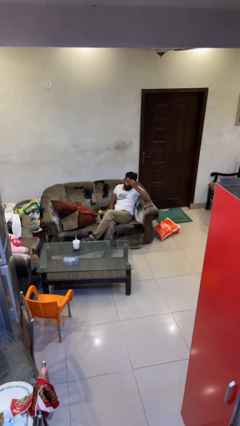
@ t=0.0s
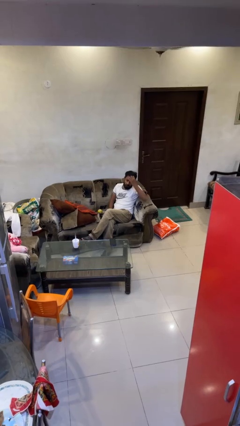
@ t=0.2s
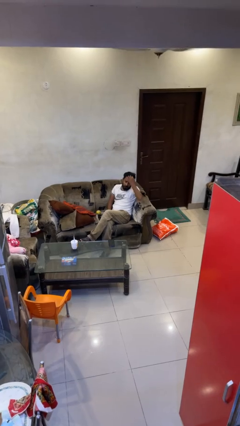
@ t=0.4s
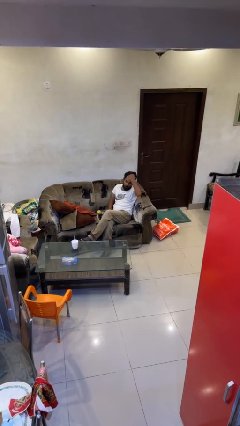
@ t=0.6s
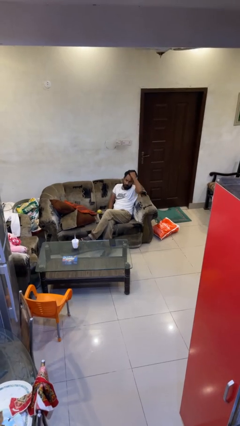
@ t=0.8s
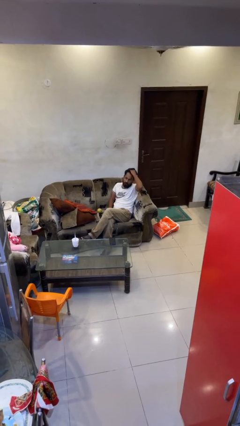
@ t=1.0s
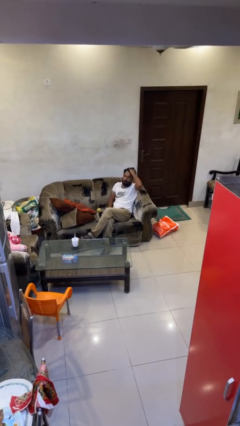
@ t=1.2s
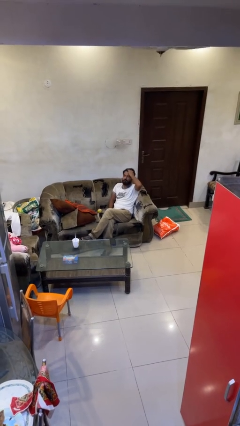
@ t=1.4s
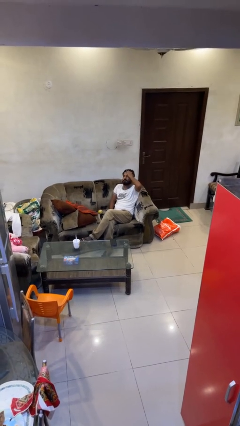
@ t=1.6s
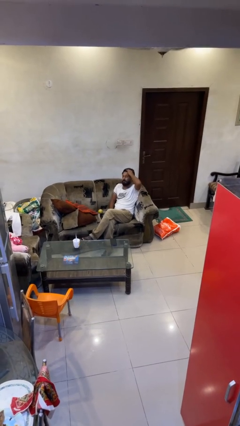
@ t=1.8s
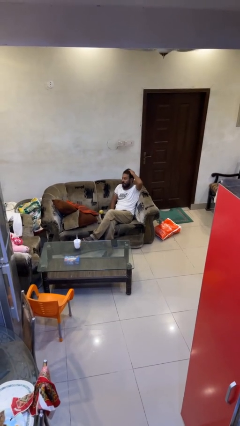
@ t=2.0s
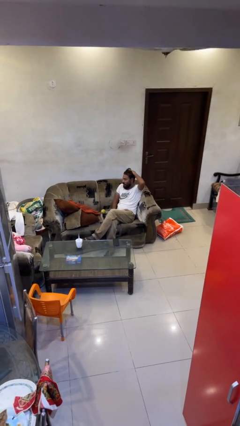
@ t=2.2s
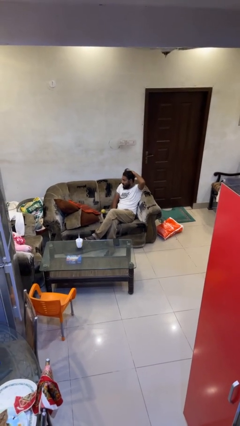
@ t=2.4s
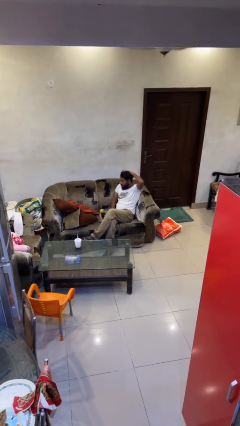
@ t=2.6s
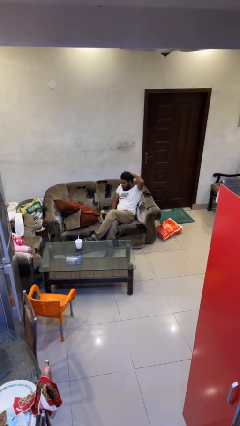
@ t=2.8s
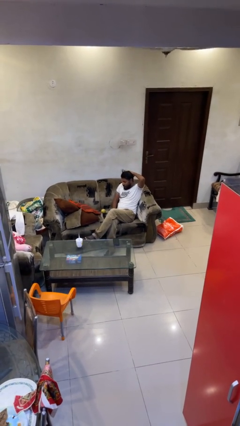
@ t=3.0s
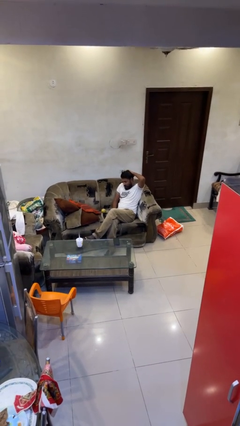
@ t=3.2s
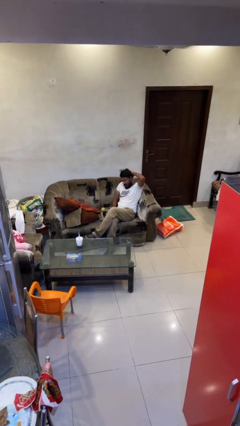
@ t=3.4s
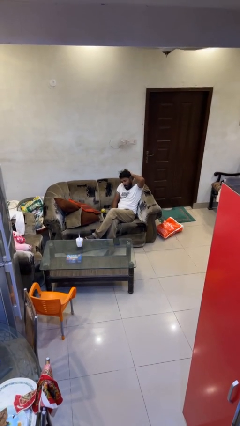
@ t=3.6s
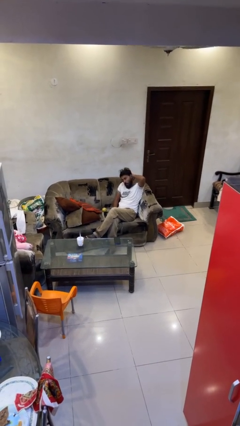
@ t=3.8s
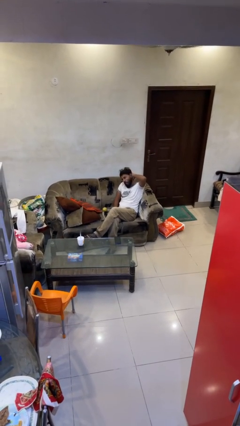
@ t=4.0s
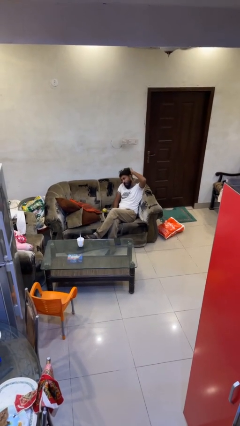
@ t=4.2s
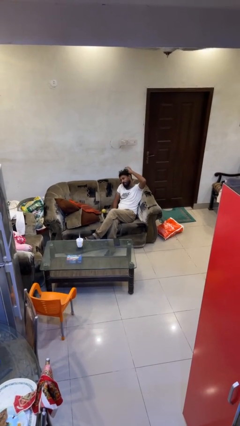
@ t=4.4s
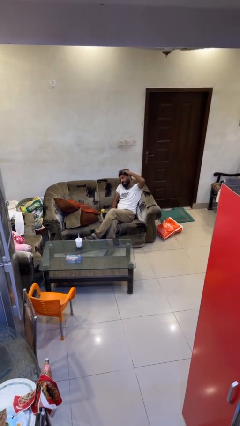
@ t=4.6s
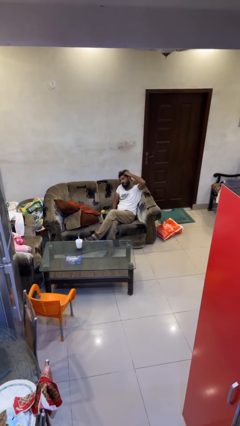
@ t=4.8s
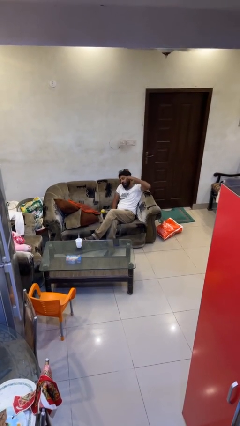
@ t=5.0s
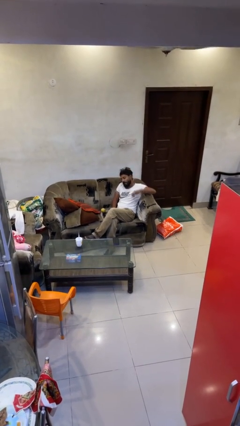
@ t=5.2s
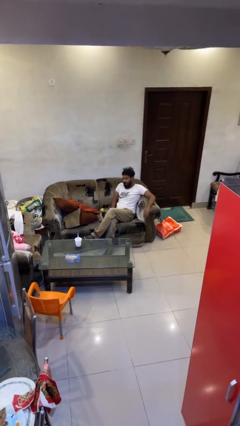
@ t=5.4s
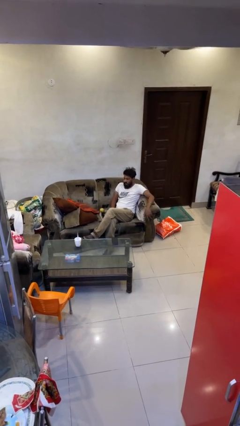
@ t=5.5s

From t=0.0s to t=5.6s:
person strokes hair

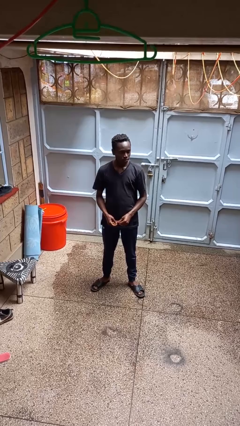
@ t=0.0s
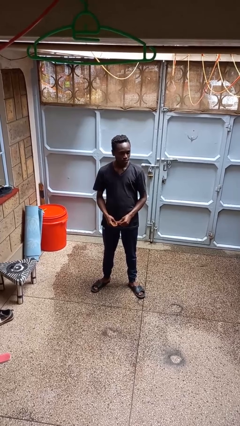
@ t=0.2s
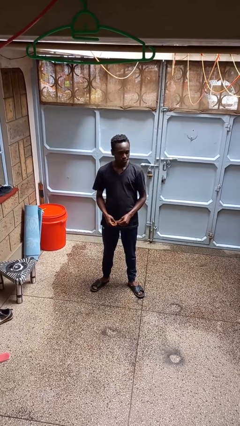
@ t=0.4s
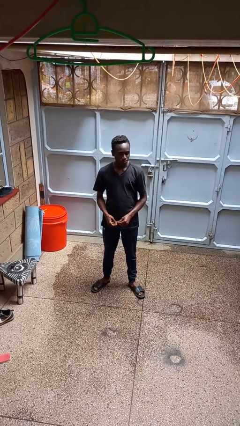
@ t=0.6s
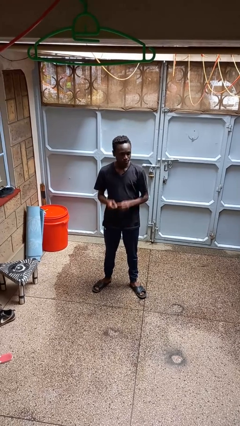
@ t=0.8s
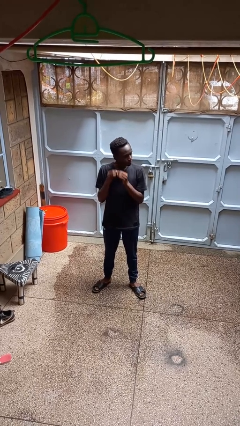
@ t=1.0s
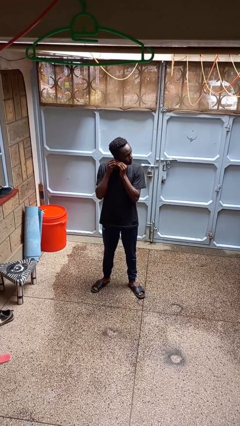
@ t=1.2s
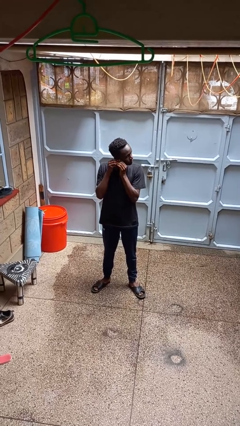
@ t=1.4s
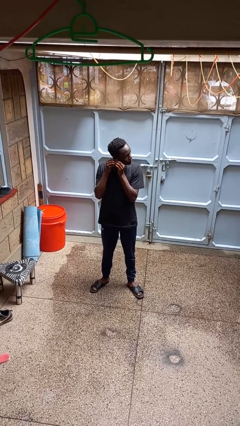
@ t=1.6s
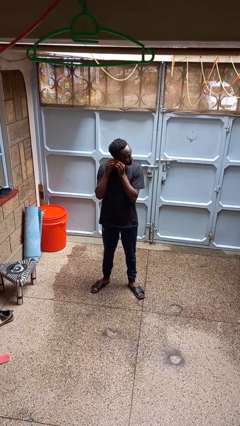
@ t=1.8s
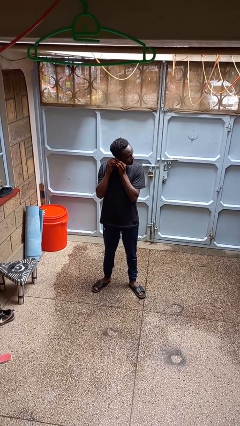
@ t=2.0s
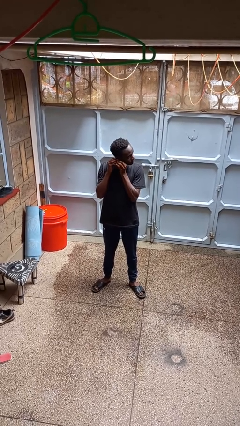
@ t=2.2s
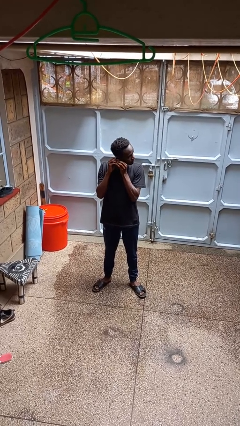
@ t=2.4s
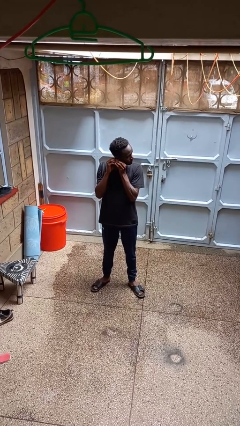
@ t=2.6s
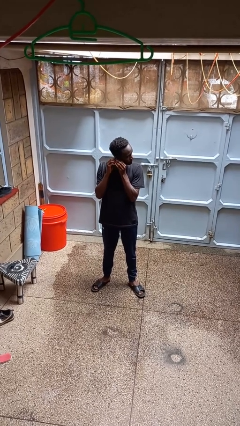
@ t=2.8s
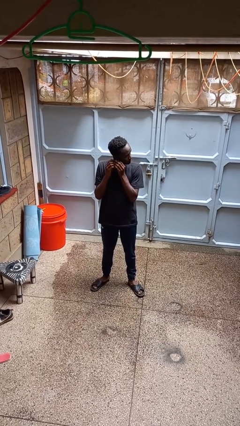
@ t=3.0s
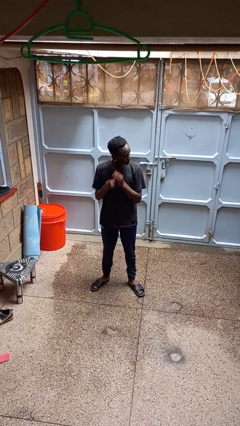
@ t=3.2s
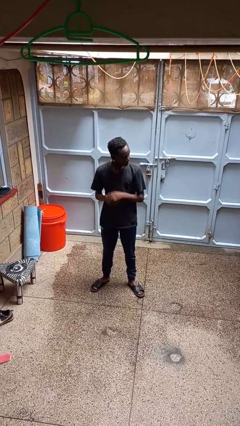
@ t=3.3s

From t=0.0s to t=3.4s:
person puts on earrings

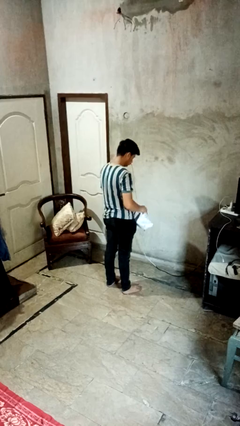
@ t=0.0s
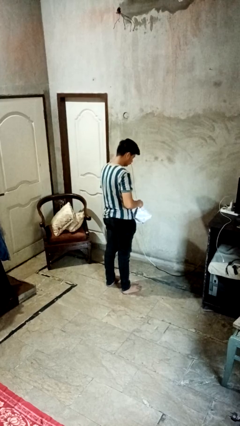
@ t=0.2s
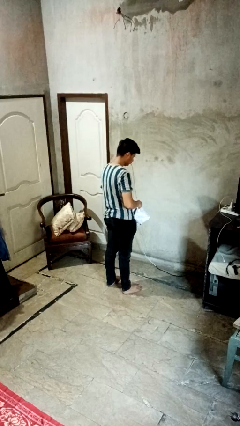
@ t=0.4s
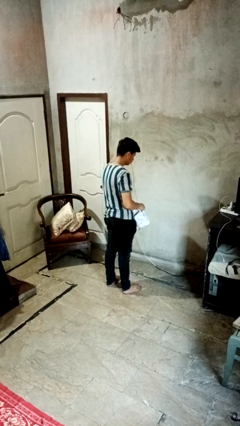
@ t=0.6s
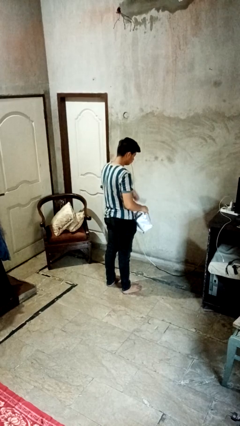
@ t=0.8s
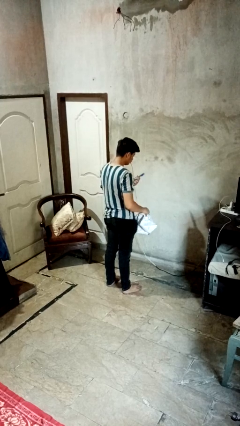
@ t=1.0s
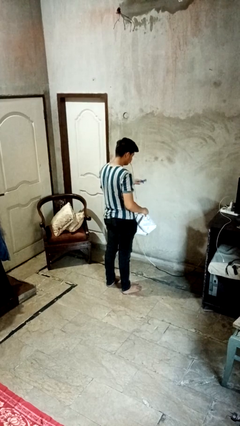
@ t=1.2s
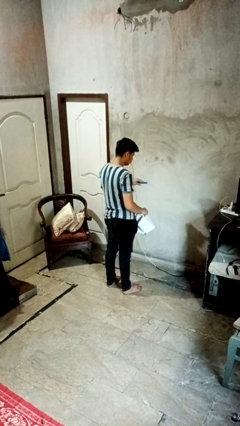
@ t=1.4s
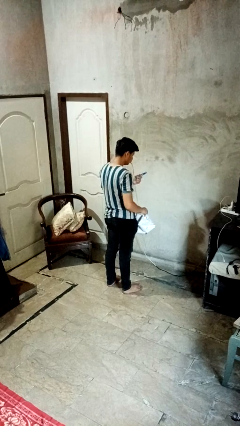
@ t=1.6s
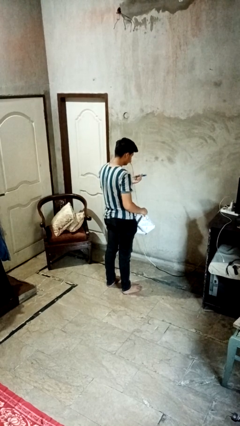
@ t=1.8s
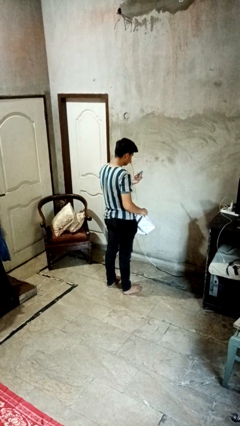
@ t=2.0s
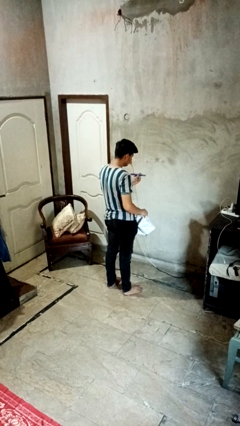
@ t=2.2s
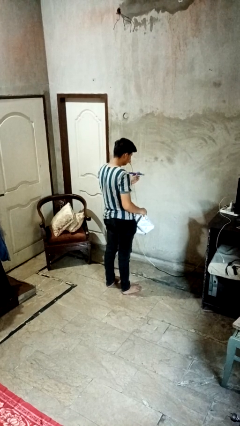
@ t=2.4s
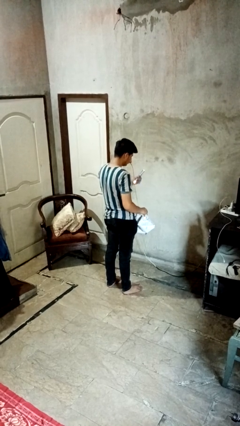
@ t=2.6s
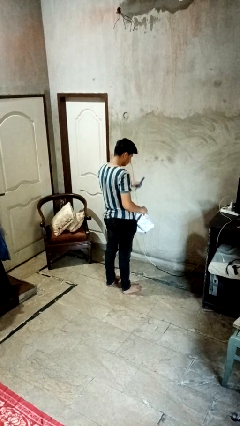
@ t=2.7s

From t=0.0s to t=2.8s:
person searches in bag

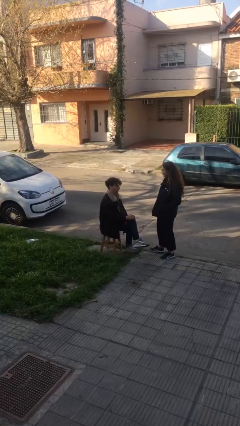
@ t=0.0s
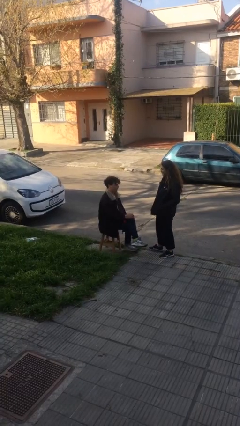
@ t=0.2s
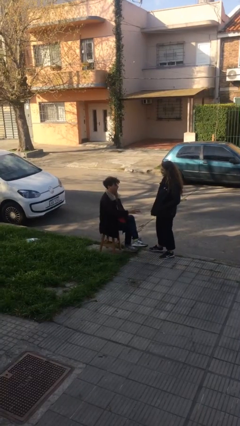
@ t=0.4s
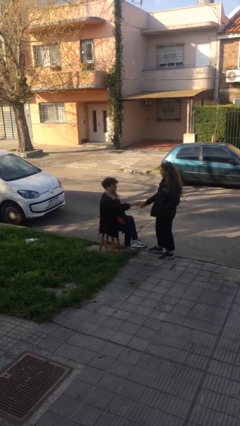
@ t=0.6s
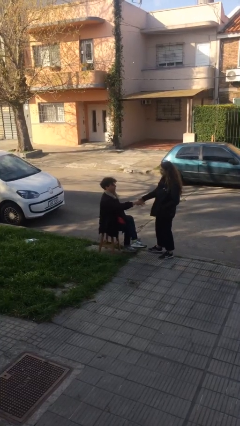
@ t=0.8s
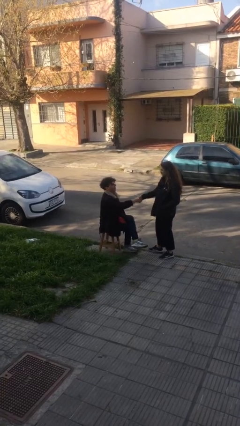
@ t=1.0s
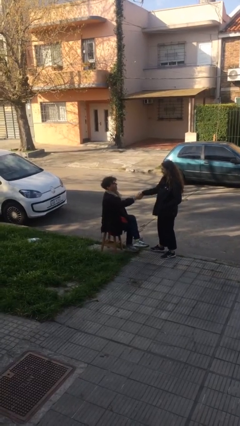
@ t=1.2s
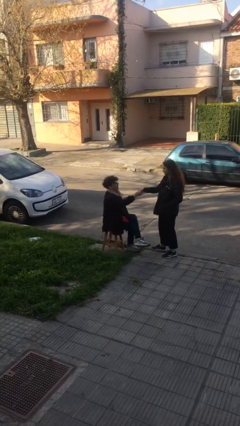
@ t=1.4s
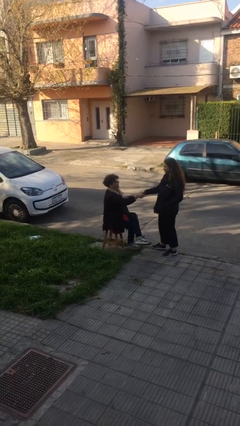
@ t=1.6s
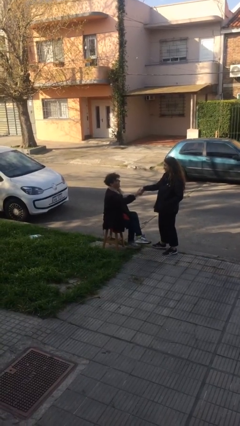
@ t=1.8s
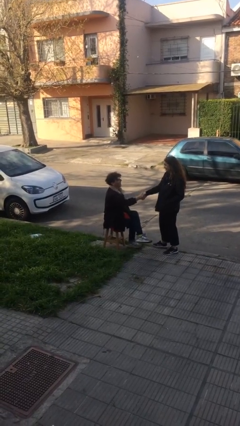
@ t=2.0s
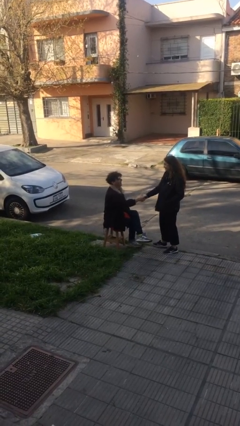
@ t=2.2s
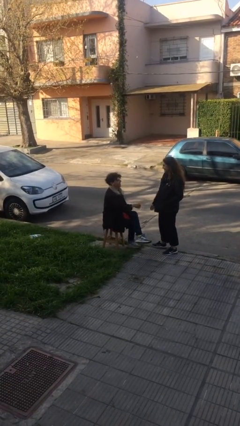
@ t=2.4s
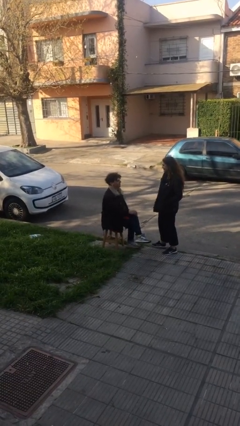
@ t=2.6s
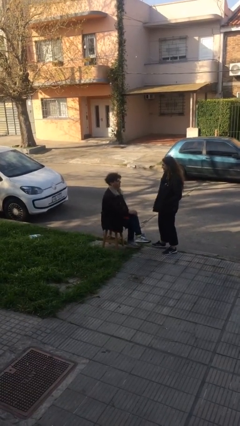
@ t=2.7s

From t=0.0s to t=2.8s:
person shakes hand

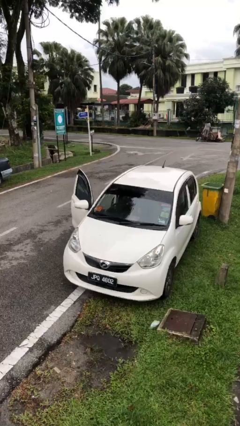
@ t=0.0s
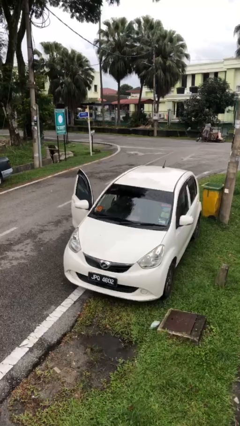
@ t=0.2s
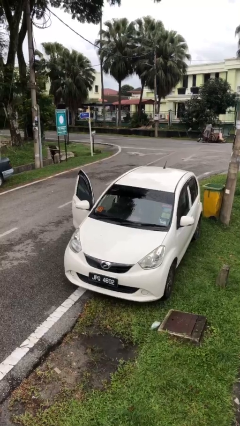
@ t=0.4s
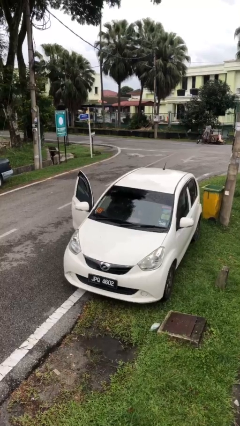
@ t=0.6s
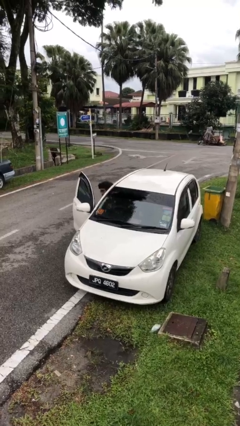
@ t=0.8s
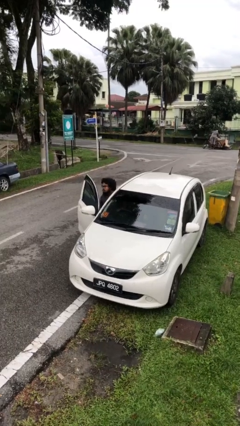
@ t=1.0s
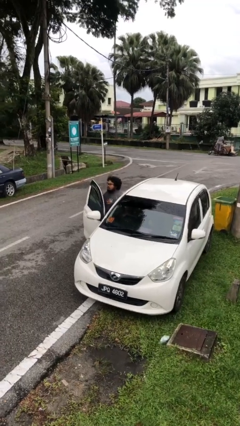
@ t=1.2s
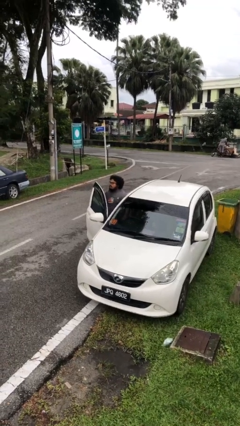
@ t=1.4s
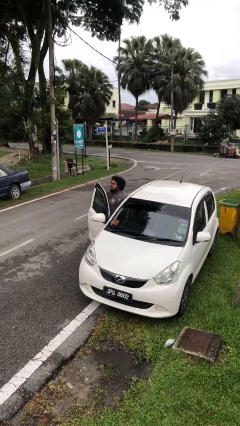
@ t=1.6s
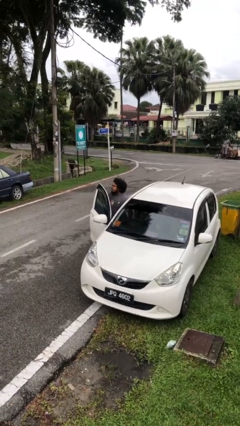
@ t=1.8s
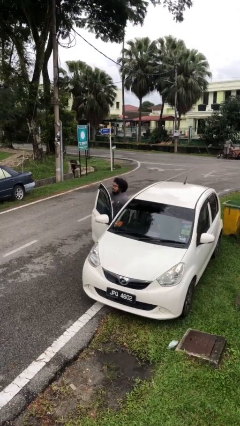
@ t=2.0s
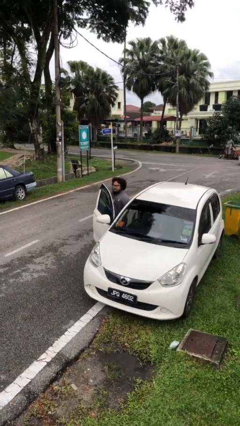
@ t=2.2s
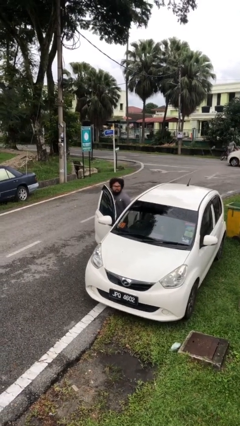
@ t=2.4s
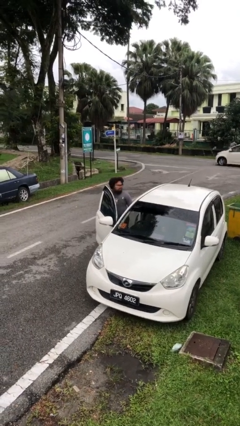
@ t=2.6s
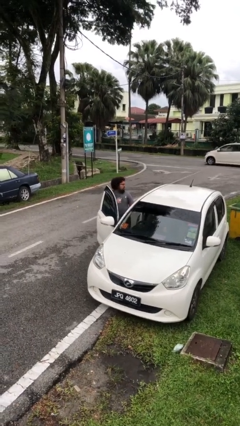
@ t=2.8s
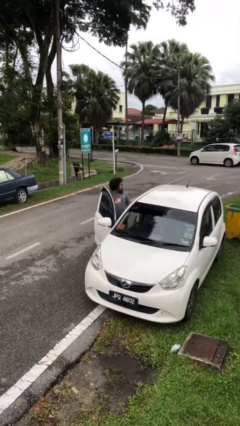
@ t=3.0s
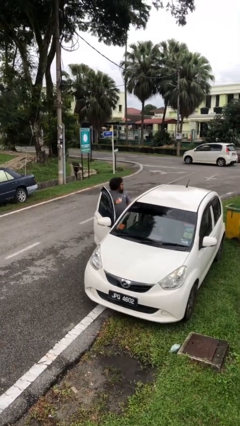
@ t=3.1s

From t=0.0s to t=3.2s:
person exits car
